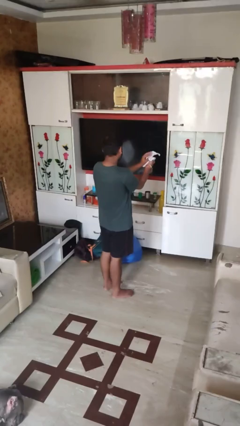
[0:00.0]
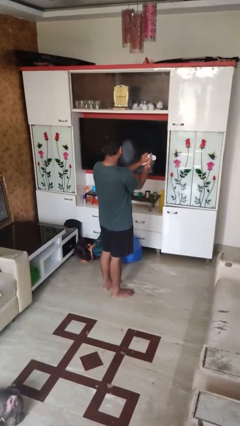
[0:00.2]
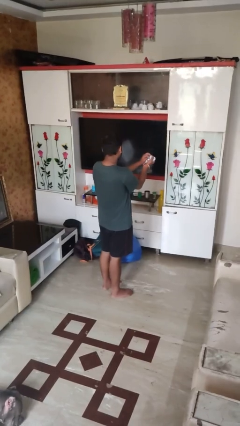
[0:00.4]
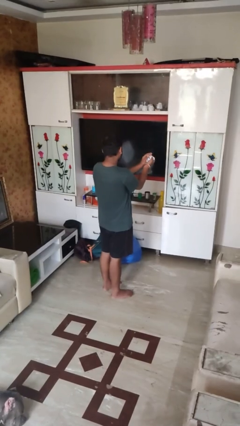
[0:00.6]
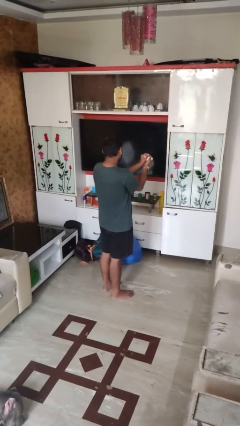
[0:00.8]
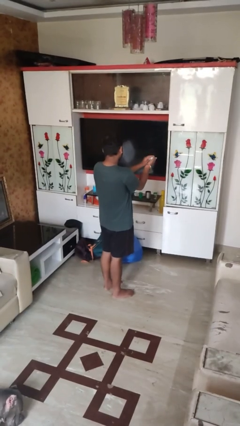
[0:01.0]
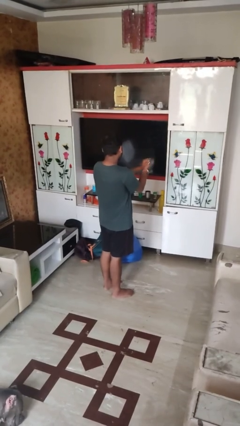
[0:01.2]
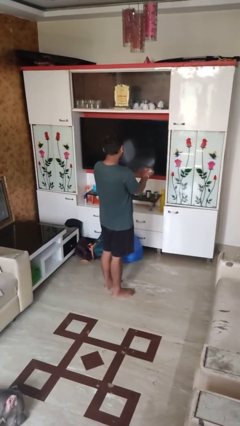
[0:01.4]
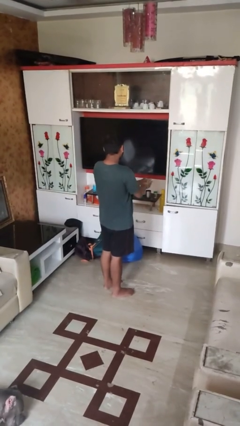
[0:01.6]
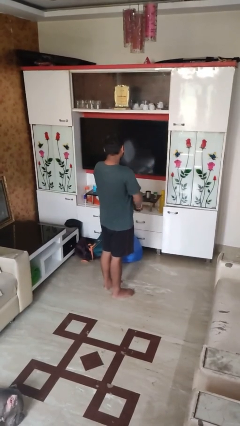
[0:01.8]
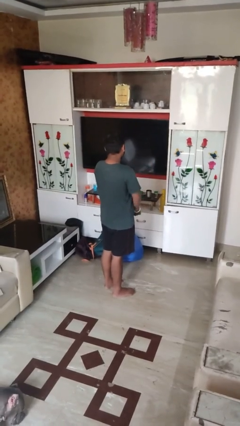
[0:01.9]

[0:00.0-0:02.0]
person crumples paper

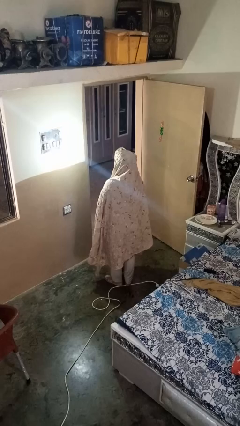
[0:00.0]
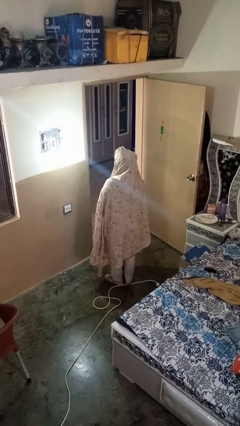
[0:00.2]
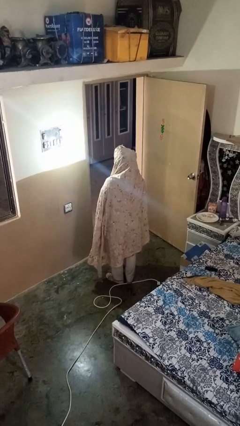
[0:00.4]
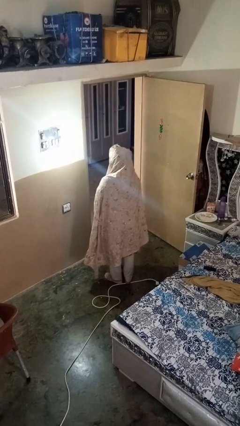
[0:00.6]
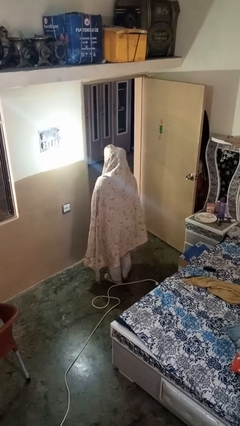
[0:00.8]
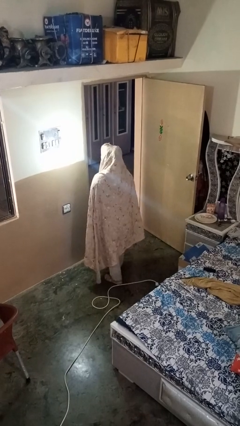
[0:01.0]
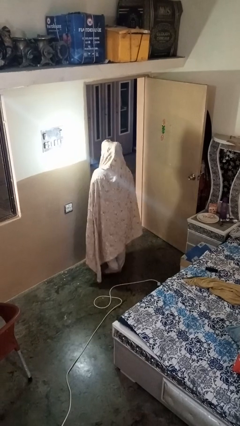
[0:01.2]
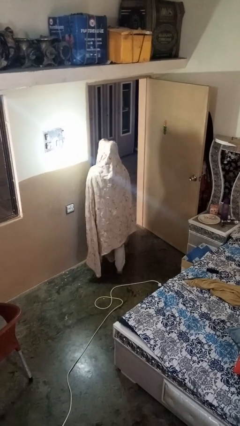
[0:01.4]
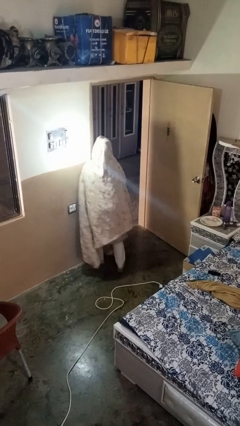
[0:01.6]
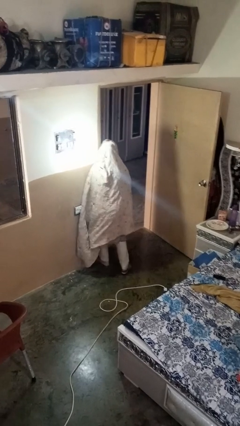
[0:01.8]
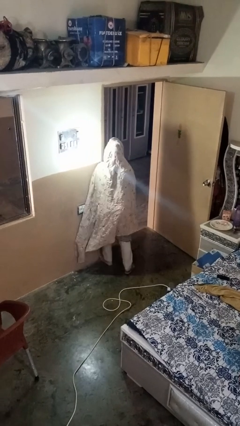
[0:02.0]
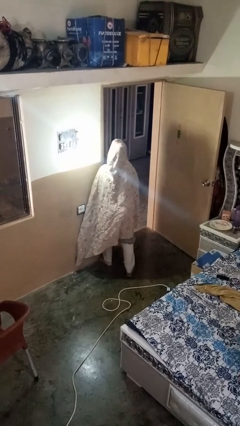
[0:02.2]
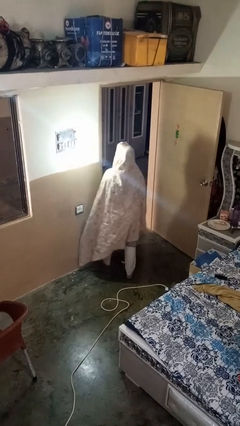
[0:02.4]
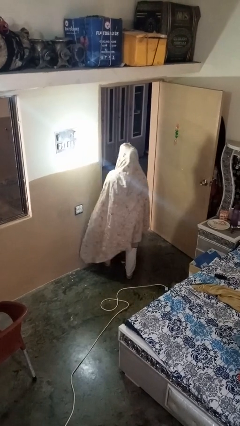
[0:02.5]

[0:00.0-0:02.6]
person bumps into wall

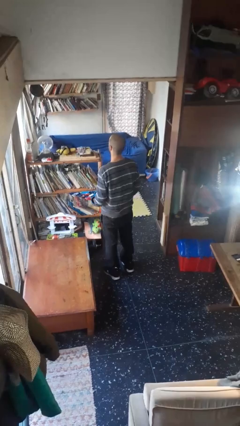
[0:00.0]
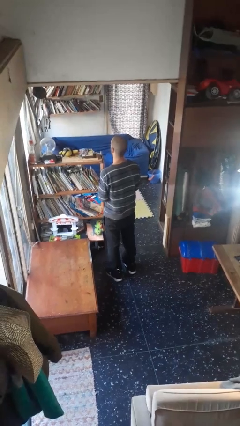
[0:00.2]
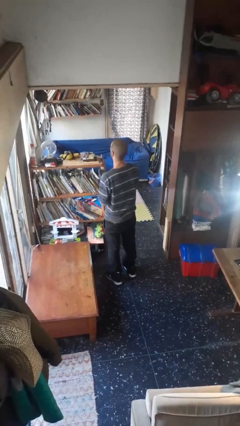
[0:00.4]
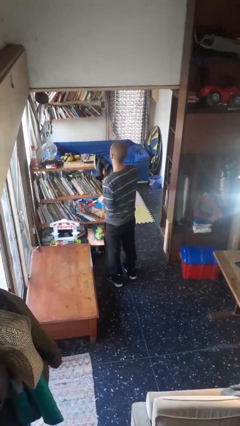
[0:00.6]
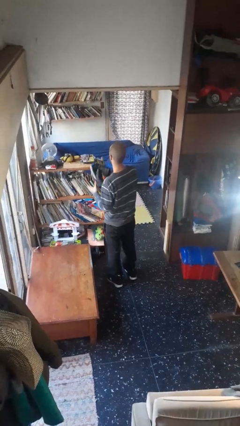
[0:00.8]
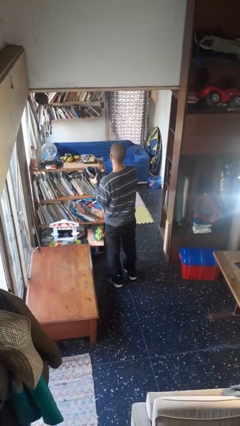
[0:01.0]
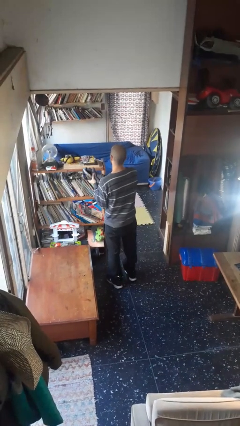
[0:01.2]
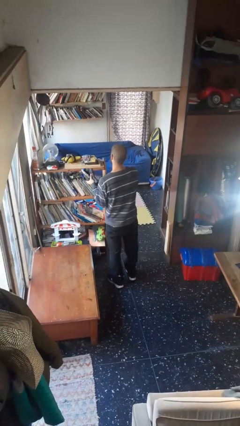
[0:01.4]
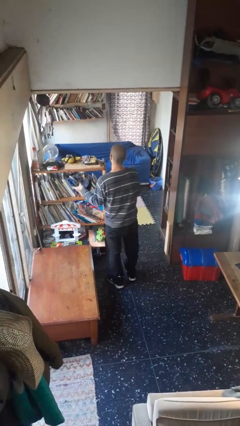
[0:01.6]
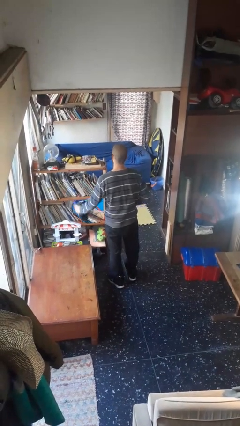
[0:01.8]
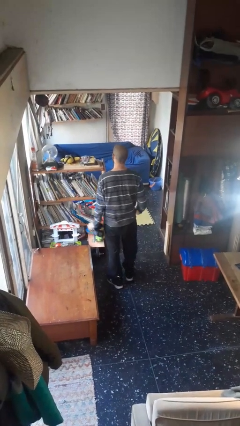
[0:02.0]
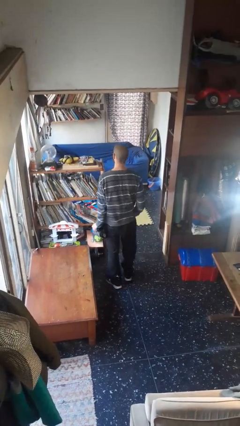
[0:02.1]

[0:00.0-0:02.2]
person takes off gloves

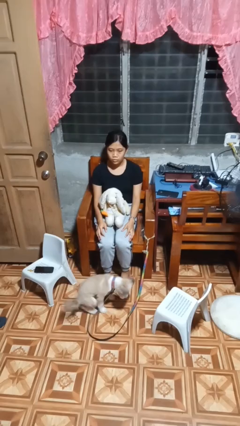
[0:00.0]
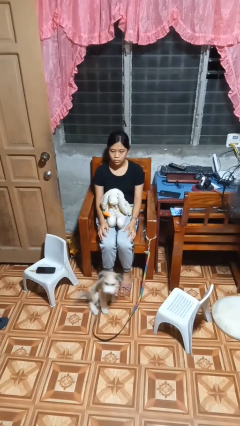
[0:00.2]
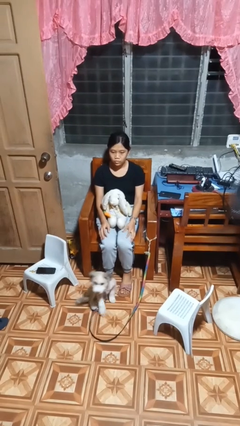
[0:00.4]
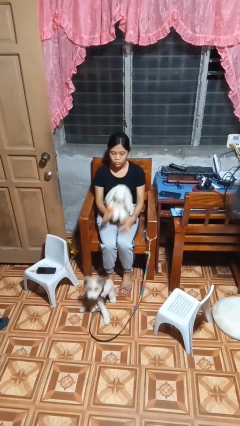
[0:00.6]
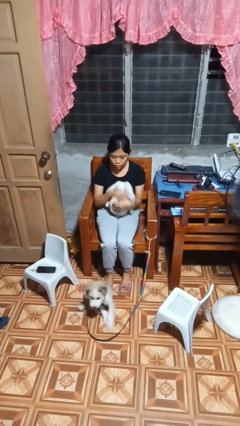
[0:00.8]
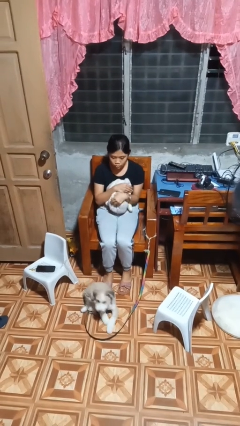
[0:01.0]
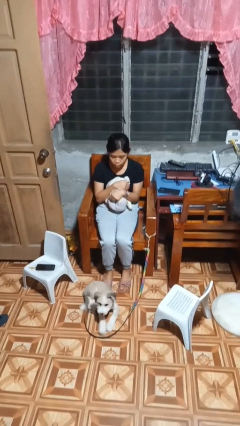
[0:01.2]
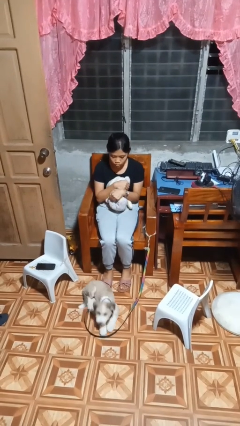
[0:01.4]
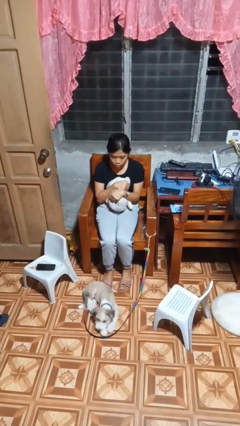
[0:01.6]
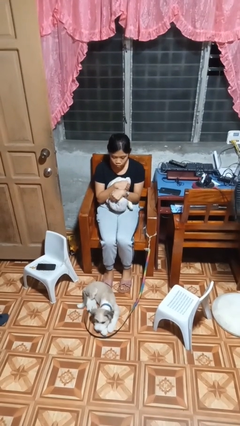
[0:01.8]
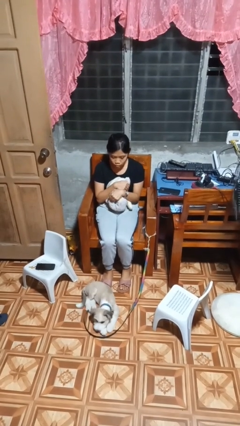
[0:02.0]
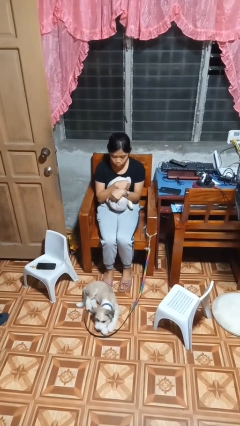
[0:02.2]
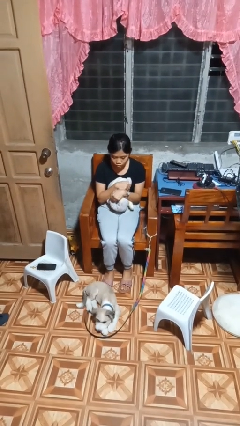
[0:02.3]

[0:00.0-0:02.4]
person hugs stuffed animal

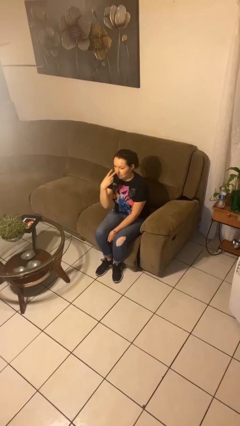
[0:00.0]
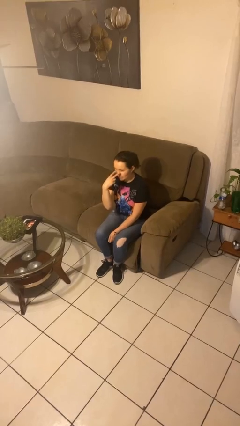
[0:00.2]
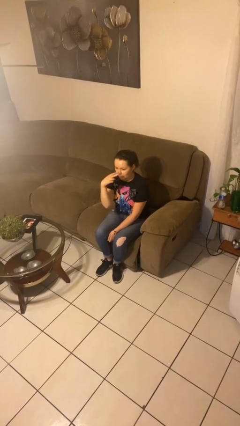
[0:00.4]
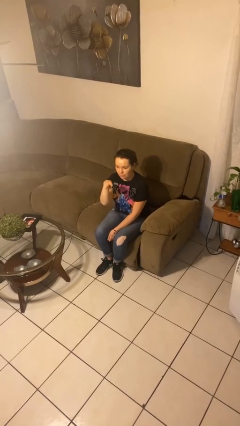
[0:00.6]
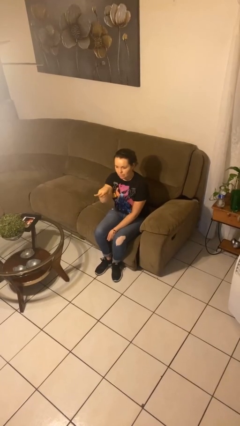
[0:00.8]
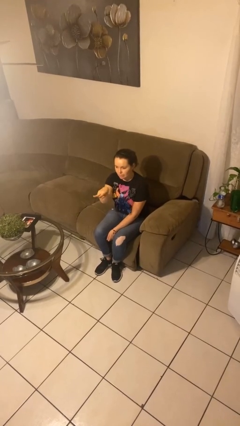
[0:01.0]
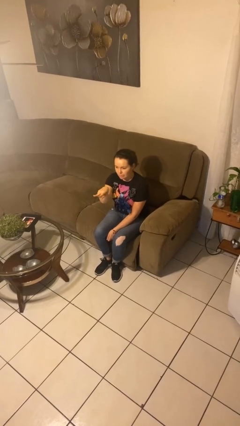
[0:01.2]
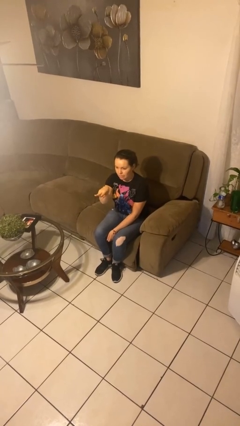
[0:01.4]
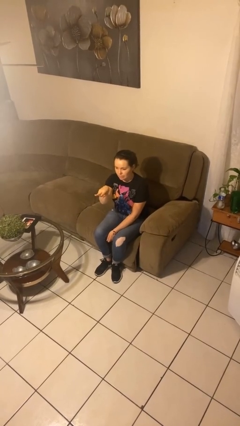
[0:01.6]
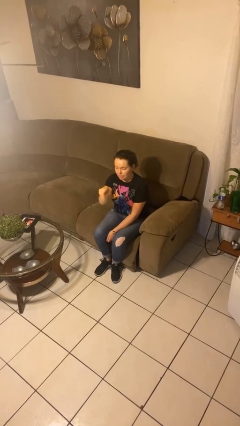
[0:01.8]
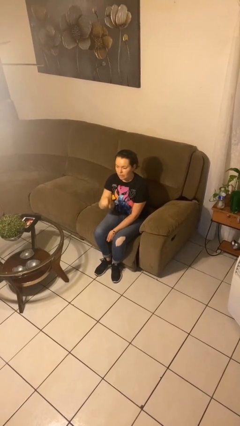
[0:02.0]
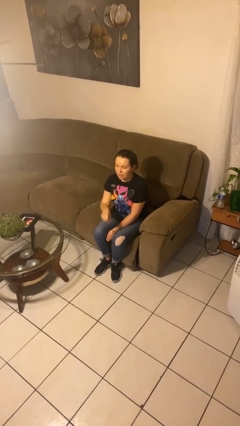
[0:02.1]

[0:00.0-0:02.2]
person gestures watch closely

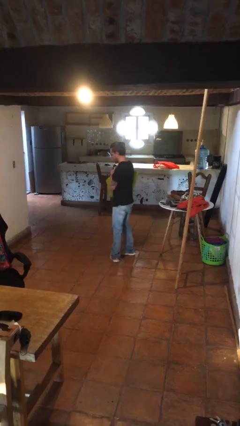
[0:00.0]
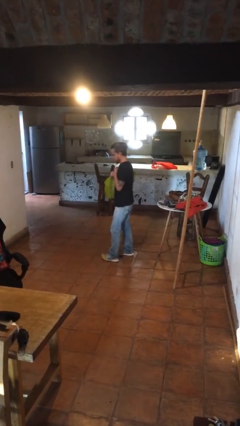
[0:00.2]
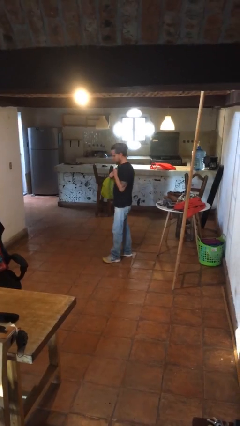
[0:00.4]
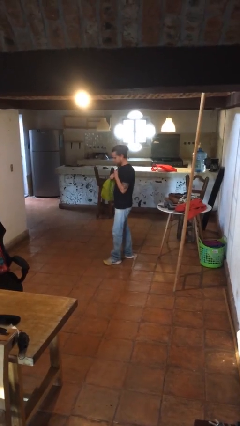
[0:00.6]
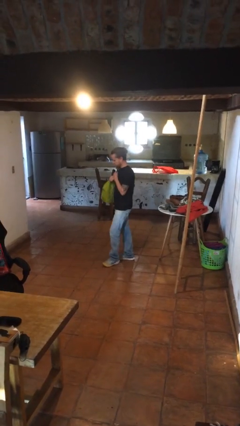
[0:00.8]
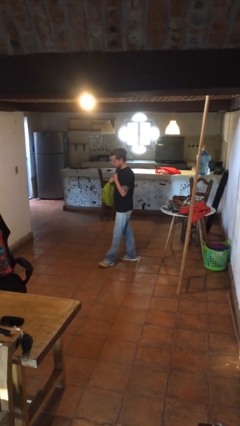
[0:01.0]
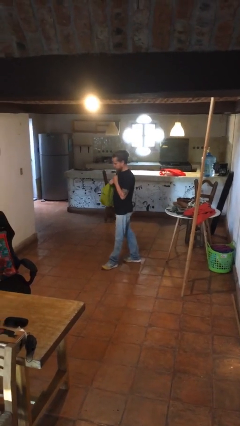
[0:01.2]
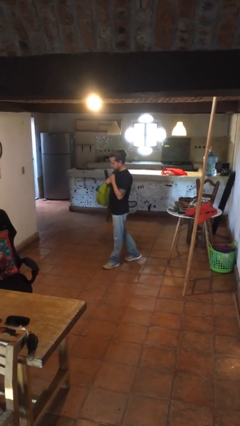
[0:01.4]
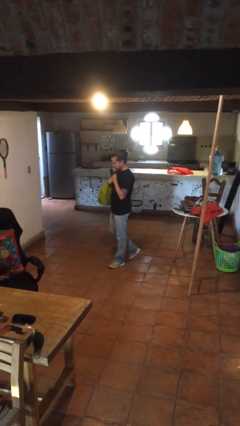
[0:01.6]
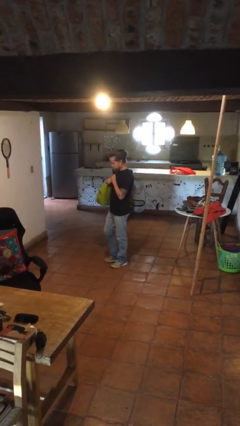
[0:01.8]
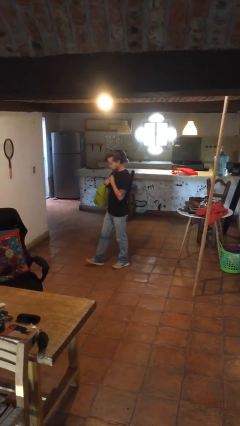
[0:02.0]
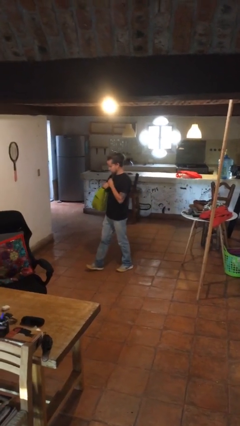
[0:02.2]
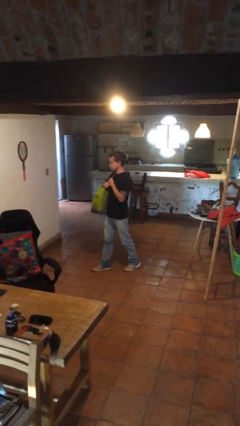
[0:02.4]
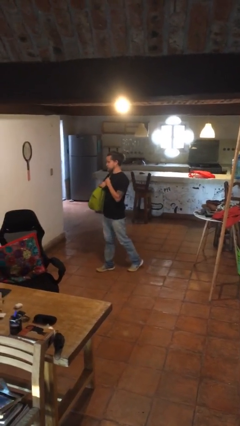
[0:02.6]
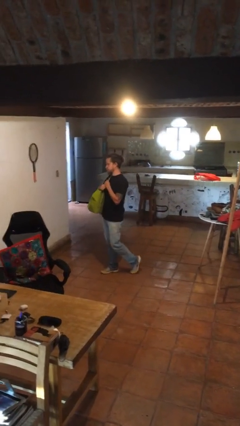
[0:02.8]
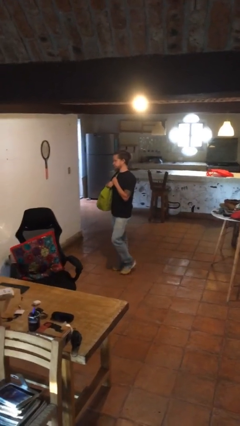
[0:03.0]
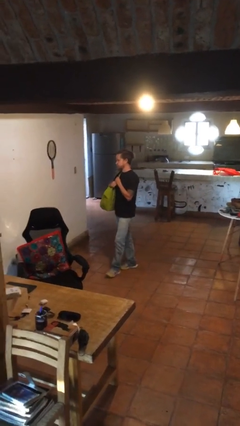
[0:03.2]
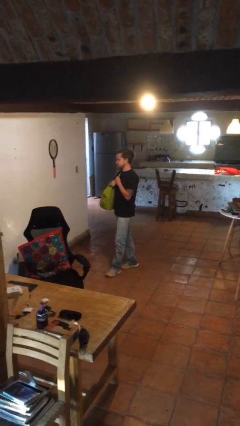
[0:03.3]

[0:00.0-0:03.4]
person carries groceries

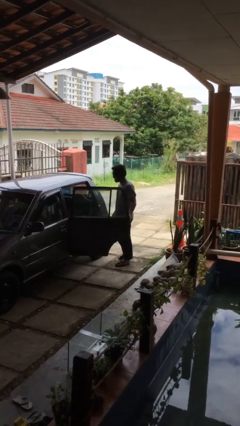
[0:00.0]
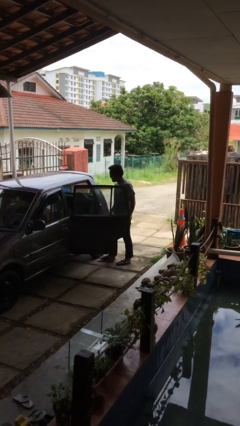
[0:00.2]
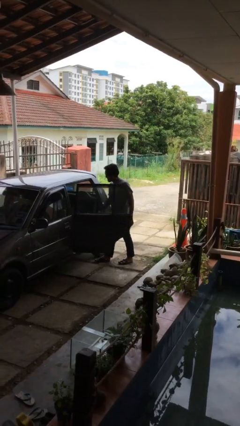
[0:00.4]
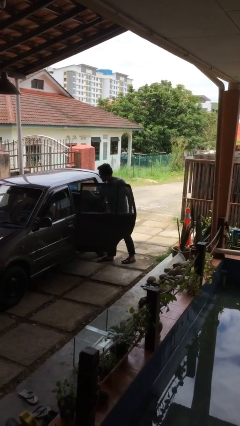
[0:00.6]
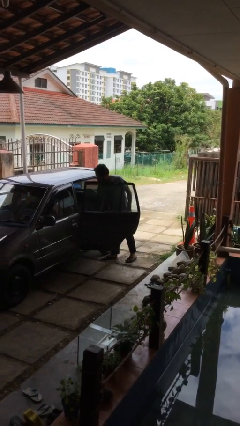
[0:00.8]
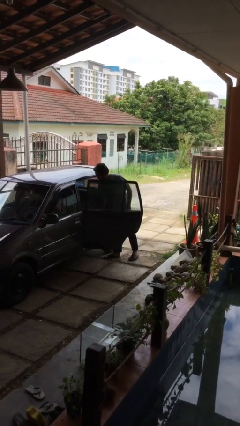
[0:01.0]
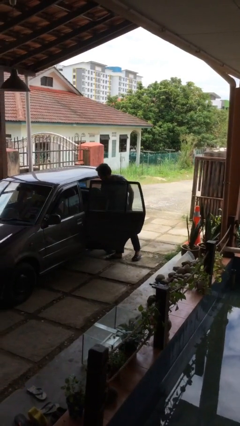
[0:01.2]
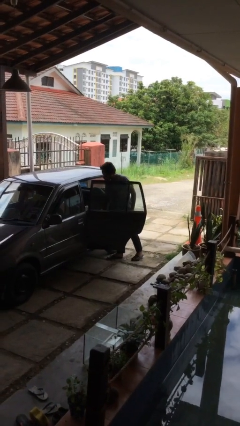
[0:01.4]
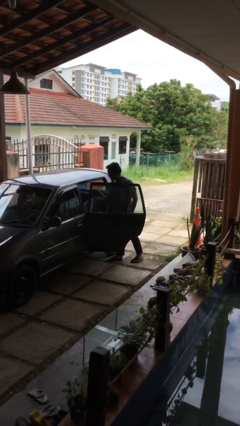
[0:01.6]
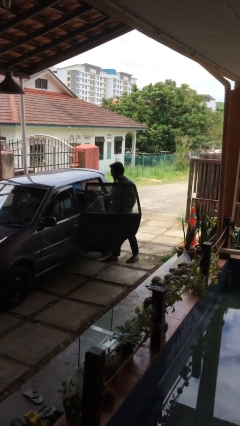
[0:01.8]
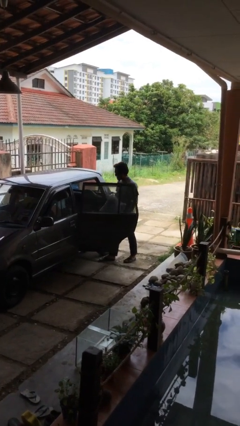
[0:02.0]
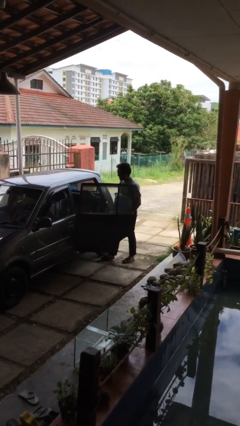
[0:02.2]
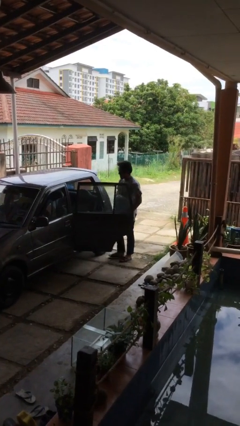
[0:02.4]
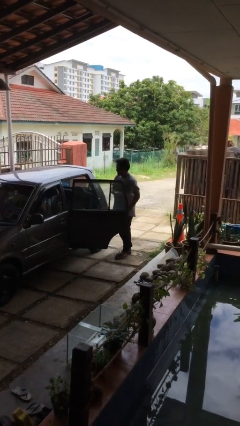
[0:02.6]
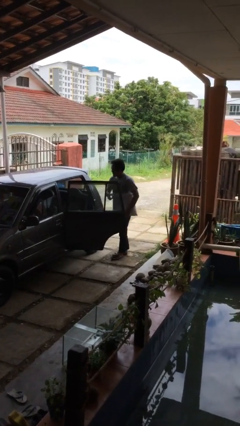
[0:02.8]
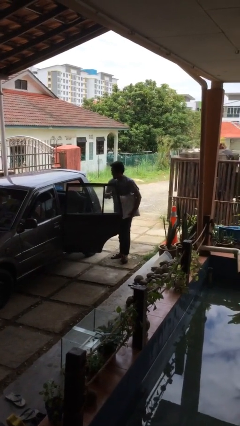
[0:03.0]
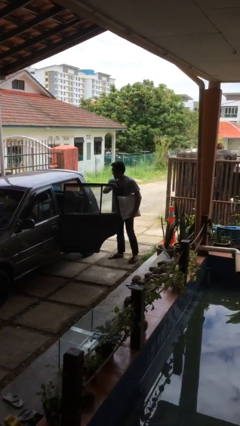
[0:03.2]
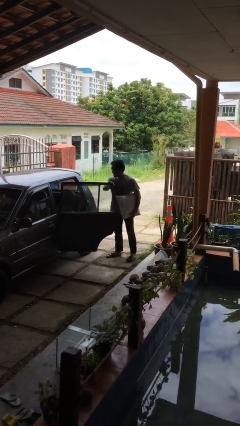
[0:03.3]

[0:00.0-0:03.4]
person unloads car
